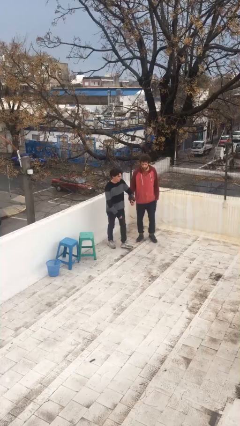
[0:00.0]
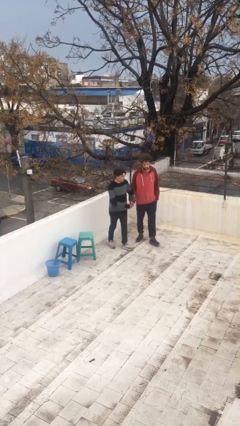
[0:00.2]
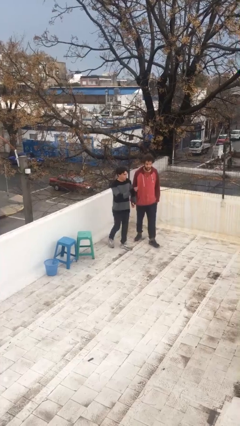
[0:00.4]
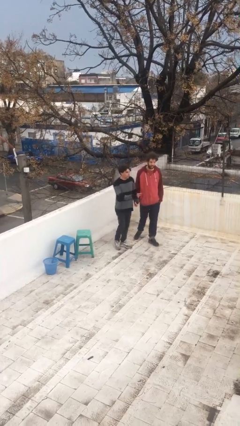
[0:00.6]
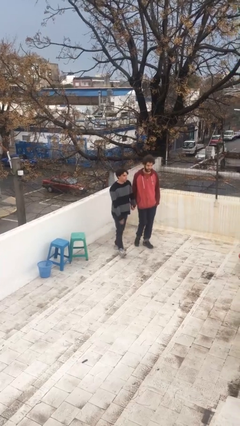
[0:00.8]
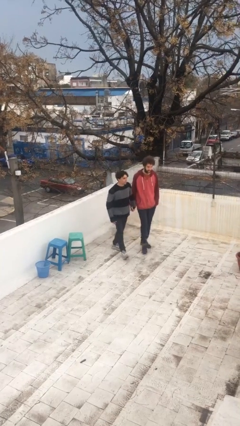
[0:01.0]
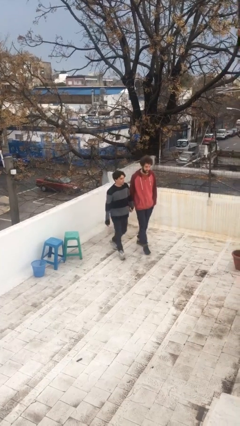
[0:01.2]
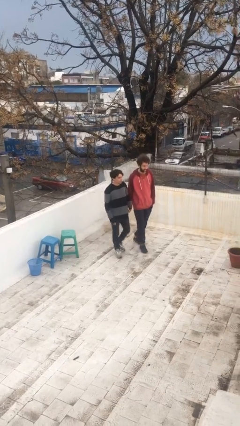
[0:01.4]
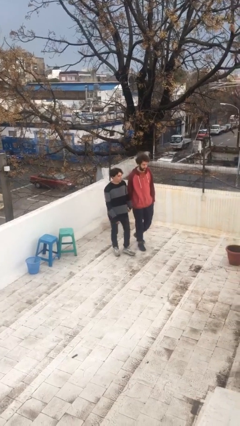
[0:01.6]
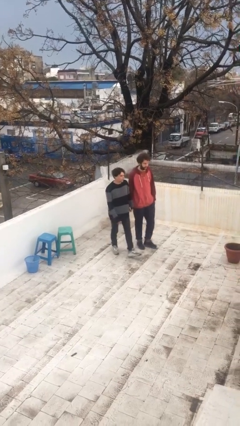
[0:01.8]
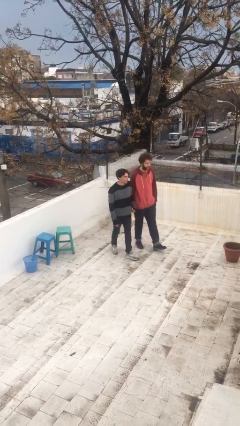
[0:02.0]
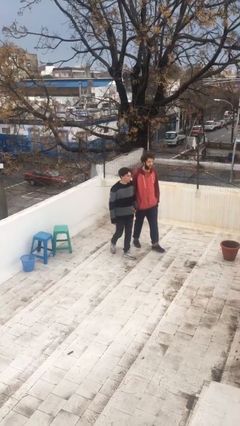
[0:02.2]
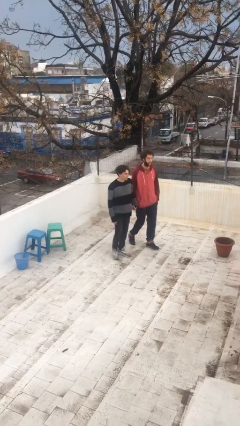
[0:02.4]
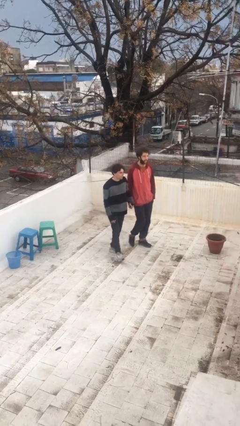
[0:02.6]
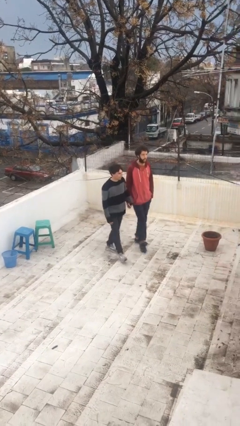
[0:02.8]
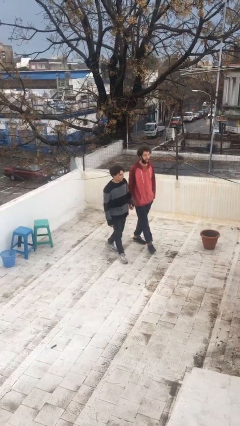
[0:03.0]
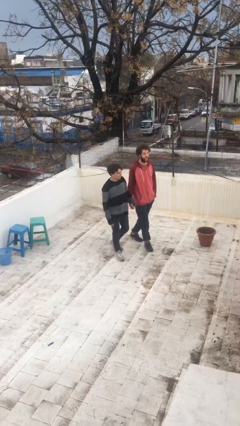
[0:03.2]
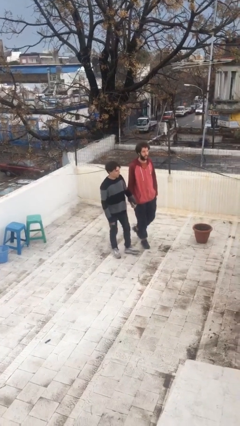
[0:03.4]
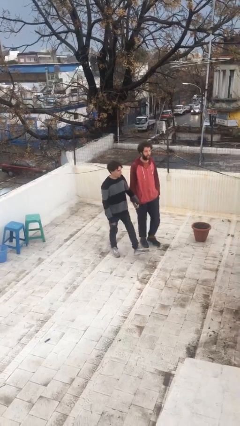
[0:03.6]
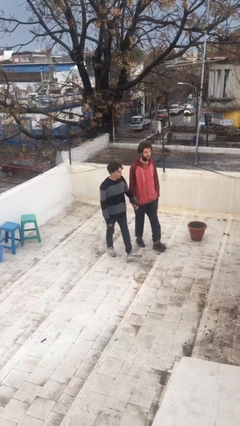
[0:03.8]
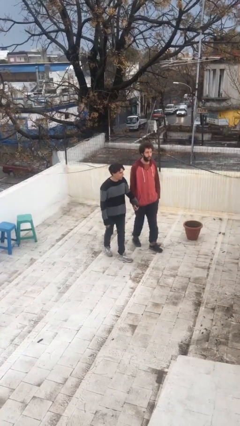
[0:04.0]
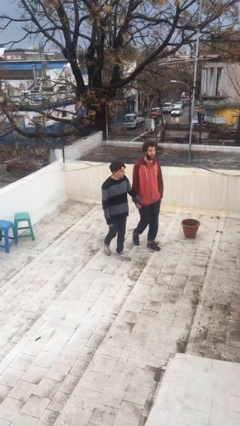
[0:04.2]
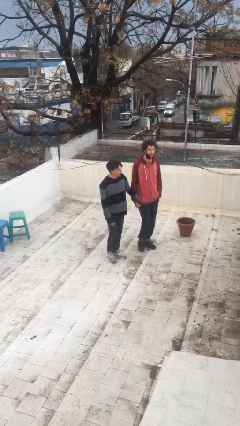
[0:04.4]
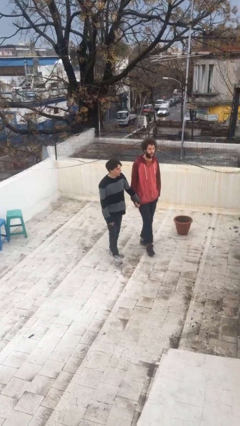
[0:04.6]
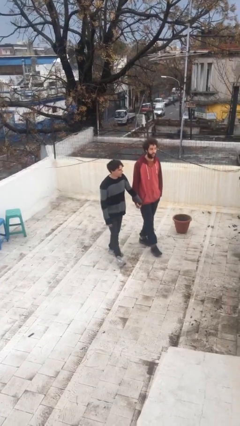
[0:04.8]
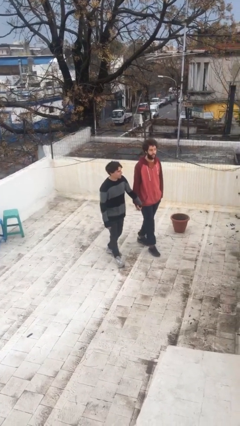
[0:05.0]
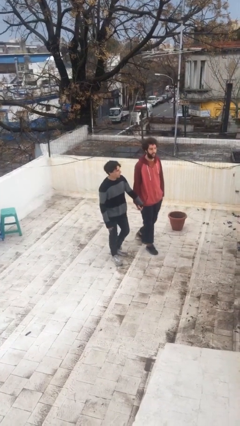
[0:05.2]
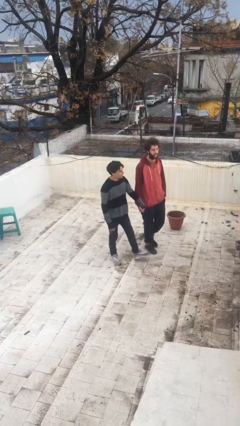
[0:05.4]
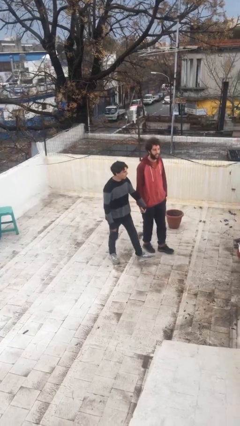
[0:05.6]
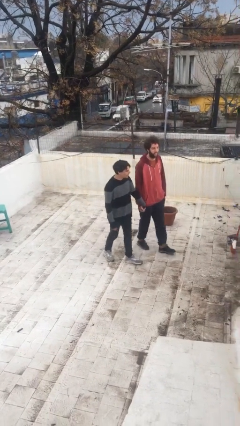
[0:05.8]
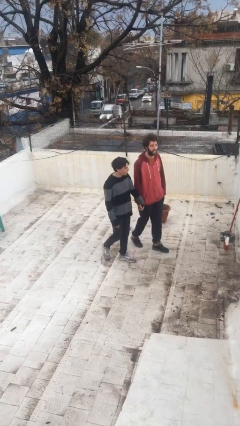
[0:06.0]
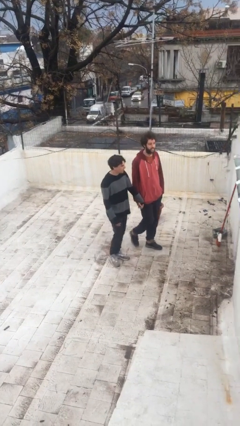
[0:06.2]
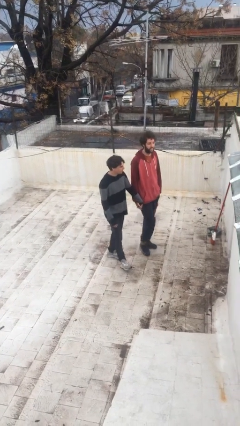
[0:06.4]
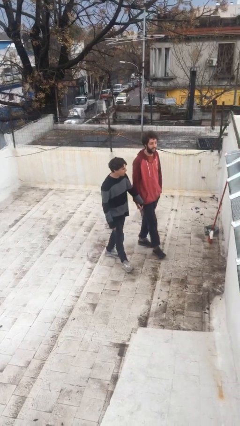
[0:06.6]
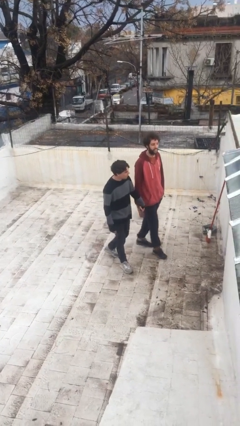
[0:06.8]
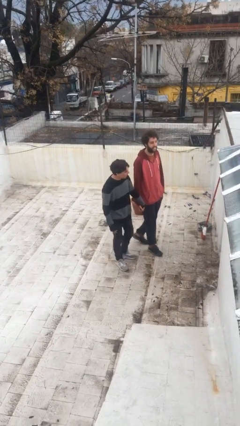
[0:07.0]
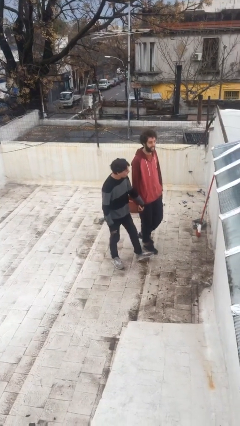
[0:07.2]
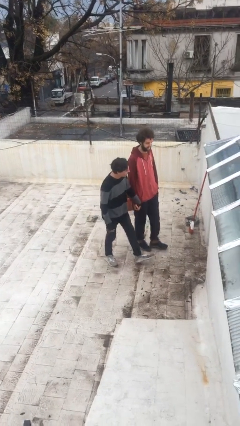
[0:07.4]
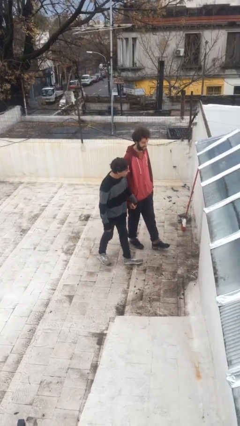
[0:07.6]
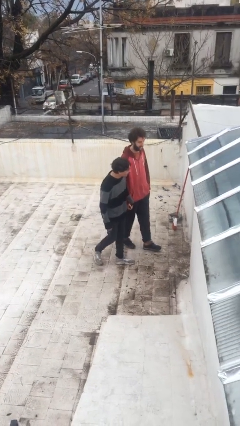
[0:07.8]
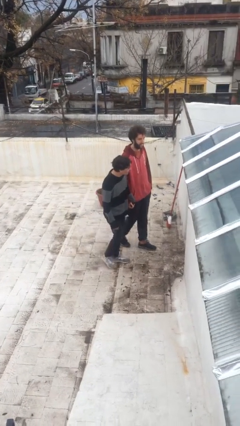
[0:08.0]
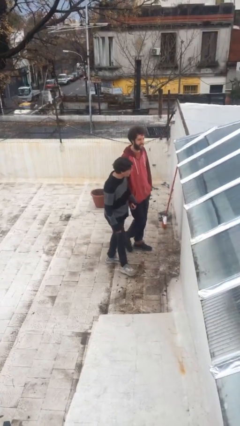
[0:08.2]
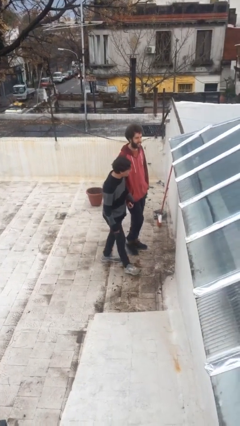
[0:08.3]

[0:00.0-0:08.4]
person holds hand

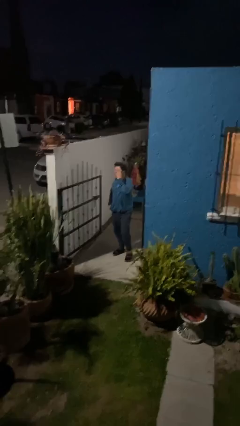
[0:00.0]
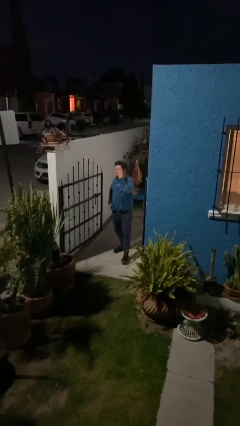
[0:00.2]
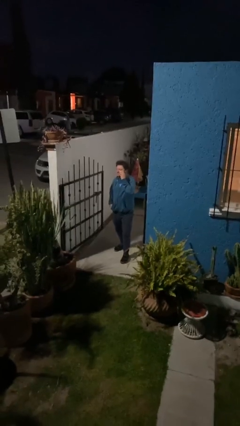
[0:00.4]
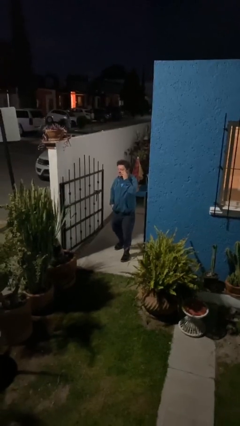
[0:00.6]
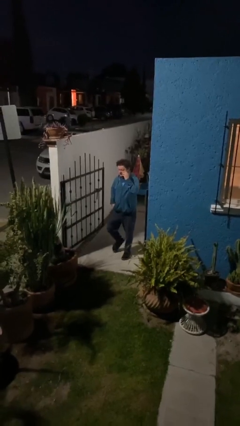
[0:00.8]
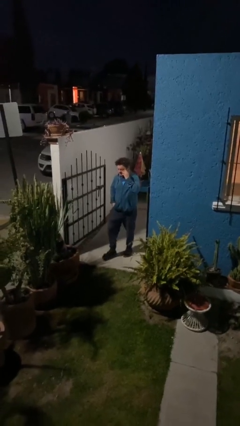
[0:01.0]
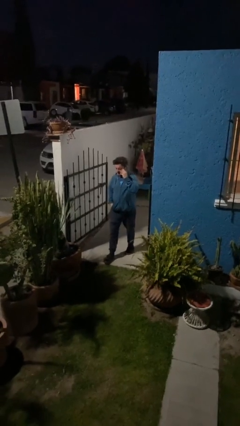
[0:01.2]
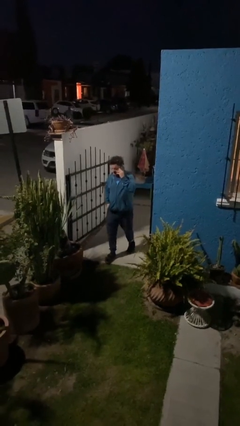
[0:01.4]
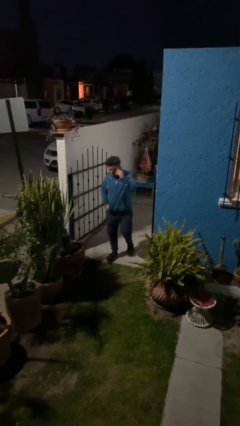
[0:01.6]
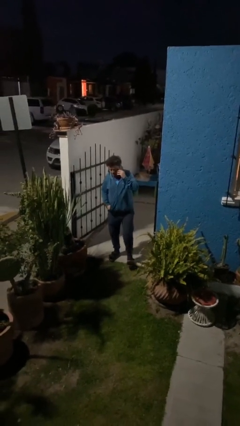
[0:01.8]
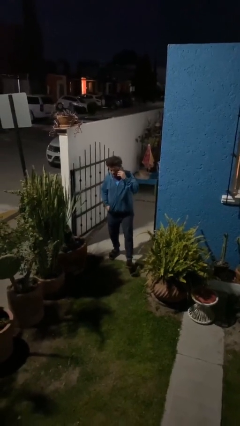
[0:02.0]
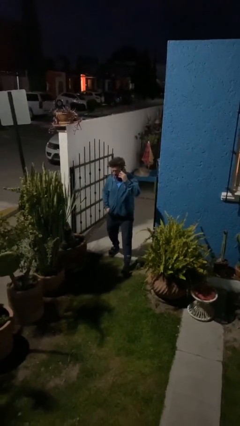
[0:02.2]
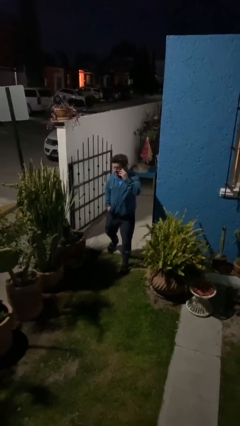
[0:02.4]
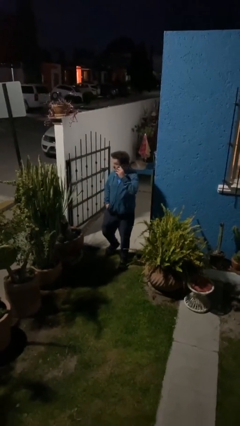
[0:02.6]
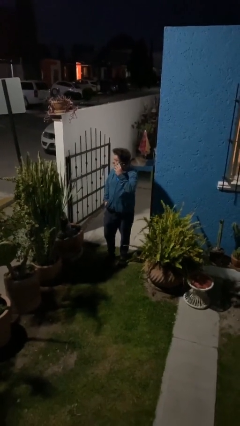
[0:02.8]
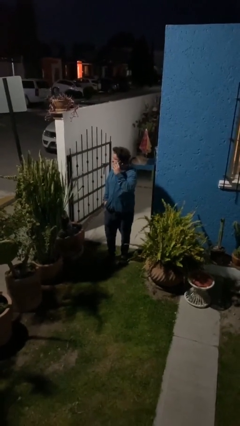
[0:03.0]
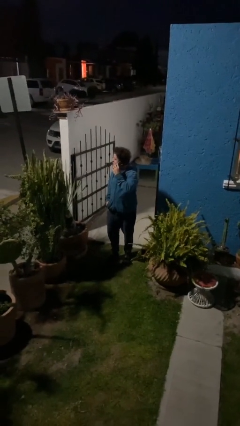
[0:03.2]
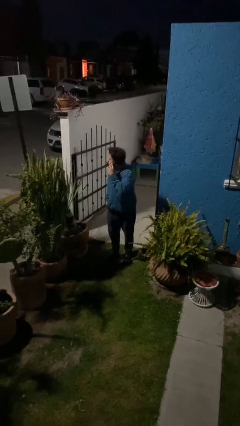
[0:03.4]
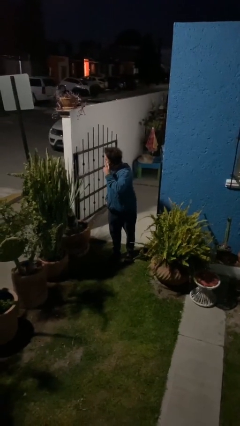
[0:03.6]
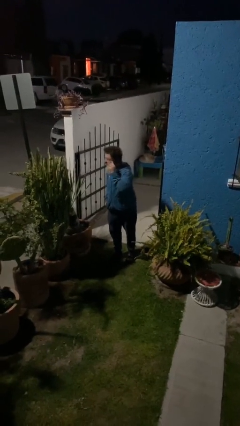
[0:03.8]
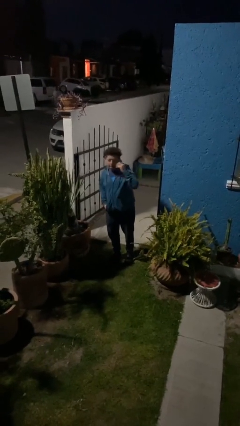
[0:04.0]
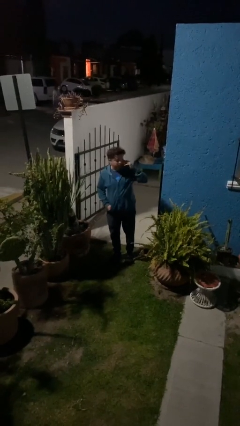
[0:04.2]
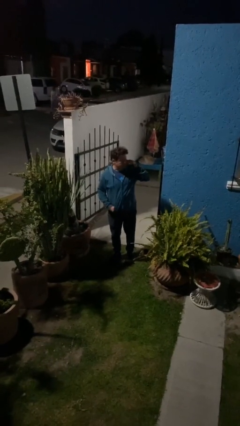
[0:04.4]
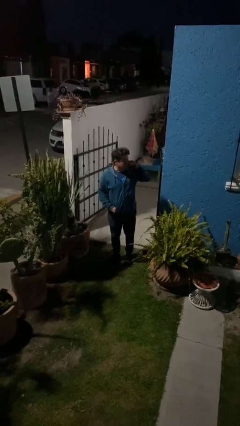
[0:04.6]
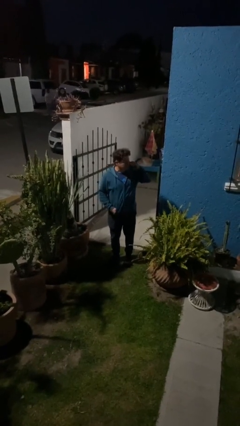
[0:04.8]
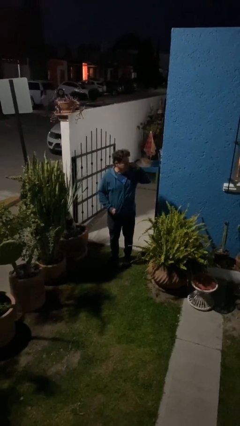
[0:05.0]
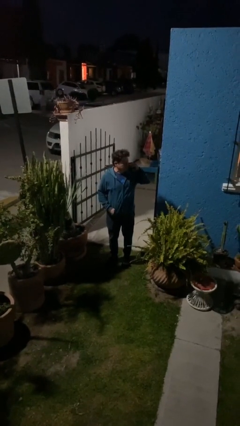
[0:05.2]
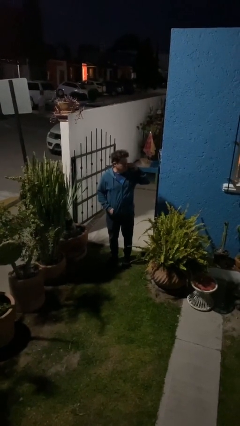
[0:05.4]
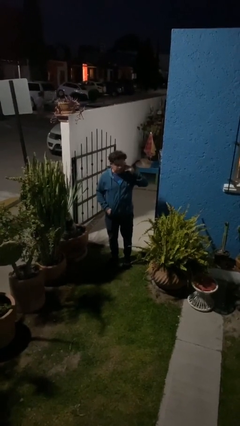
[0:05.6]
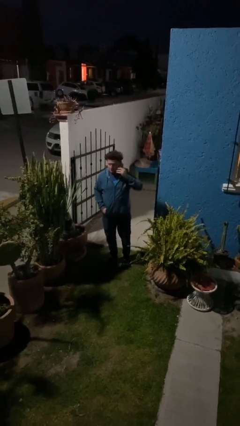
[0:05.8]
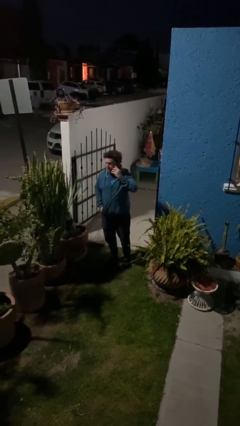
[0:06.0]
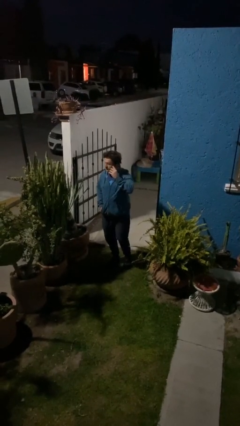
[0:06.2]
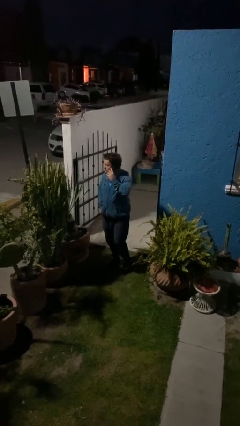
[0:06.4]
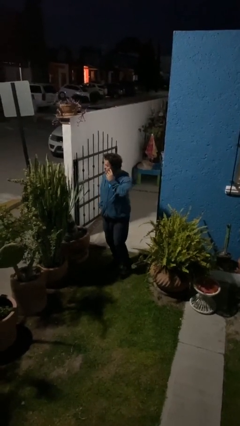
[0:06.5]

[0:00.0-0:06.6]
person enters scene through structure

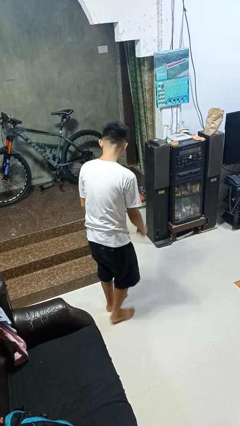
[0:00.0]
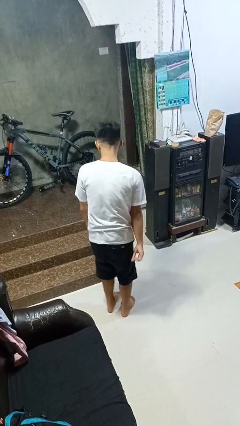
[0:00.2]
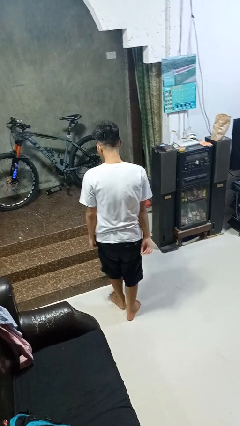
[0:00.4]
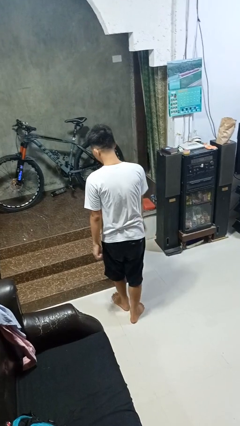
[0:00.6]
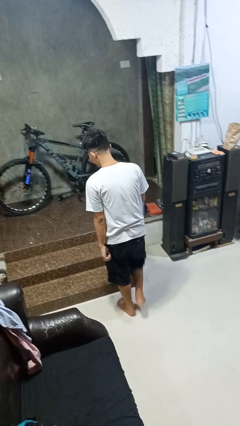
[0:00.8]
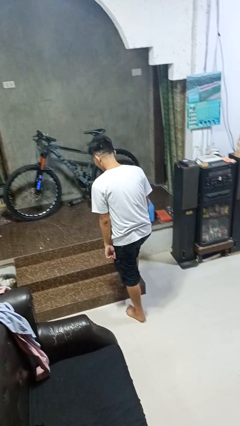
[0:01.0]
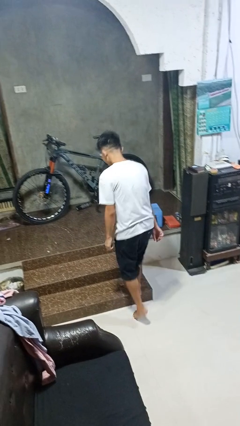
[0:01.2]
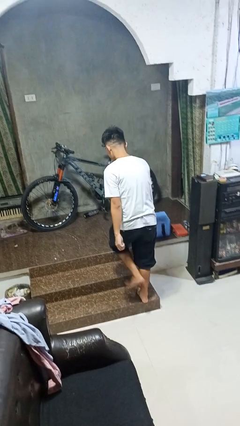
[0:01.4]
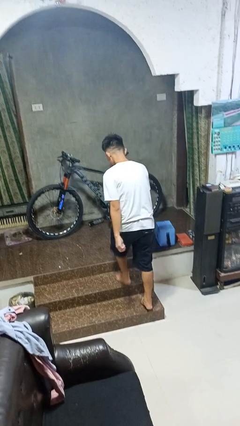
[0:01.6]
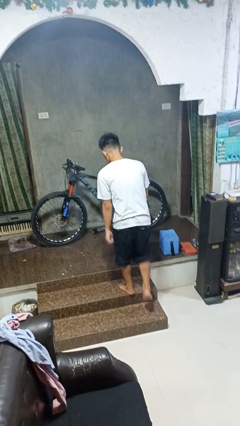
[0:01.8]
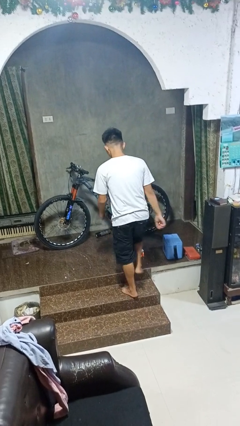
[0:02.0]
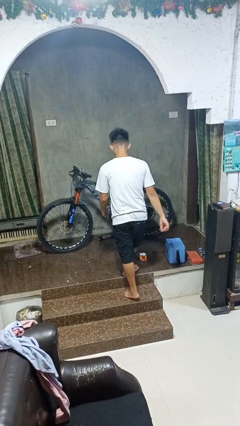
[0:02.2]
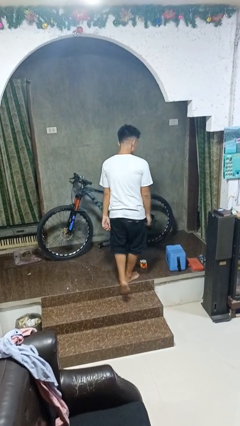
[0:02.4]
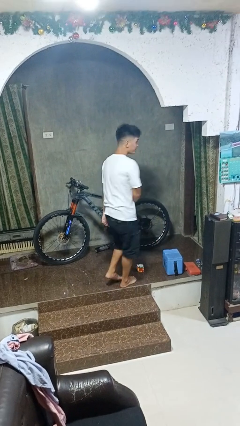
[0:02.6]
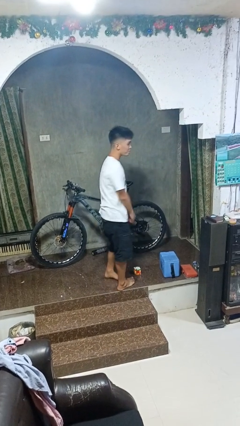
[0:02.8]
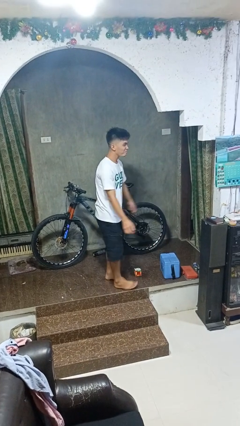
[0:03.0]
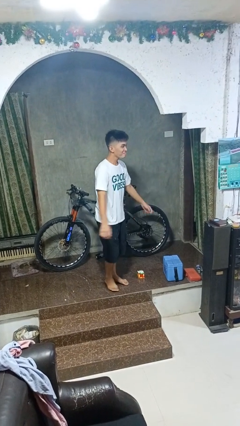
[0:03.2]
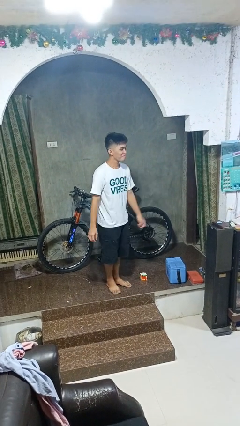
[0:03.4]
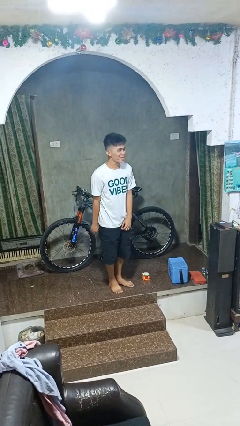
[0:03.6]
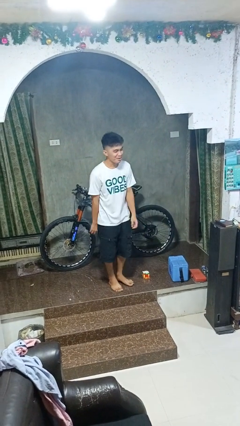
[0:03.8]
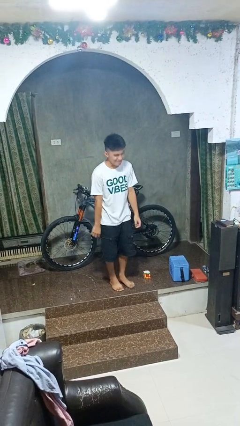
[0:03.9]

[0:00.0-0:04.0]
person climbs up stairs
